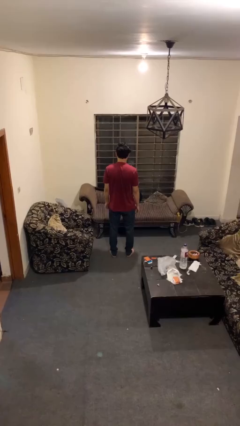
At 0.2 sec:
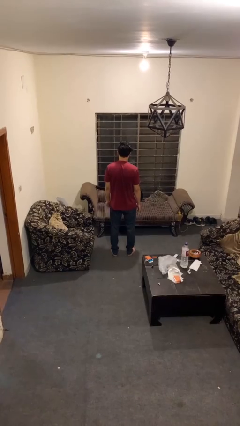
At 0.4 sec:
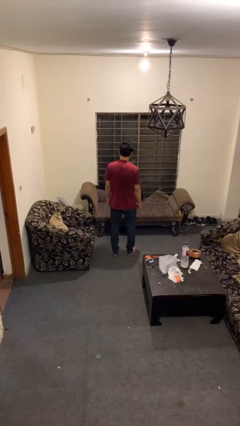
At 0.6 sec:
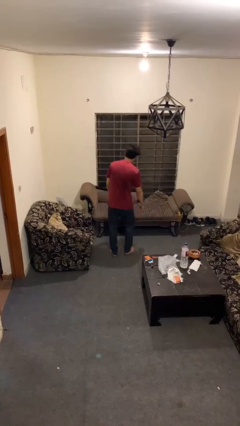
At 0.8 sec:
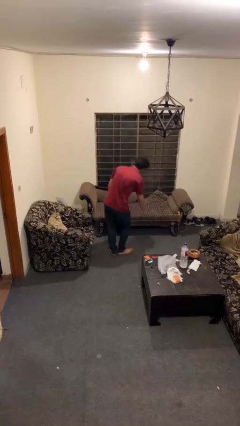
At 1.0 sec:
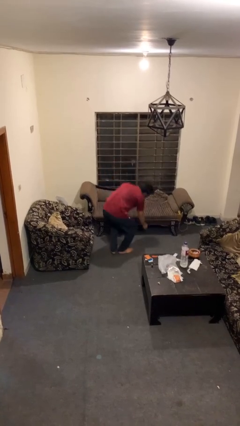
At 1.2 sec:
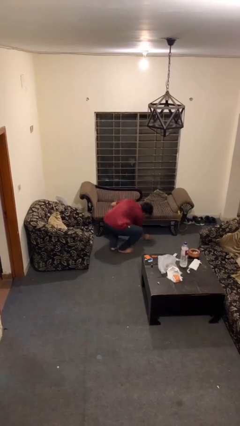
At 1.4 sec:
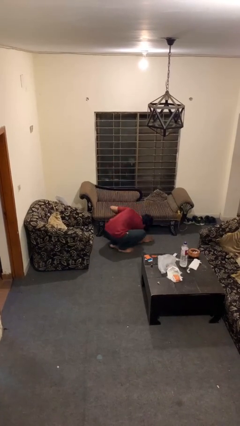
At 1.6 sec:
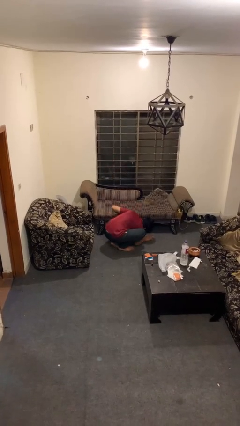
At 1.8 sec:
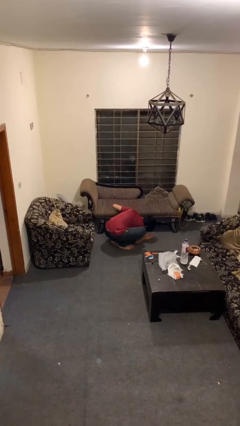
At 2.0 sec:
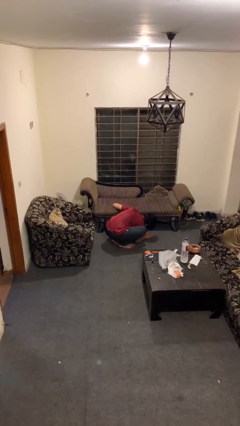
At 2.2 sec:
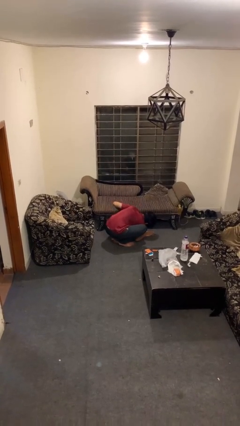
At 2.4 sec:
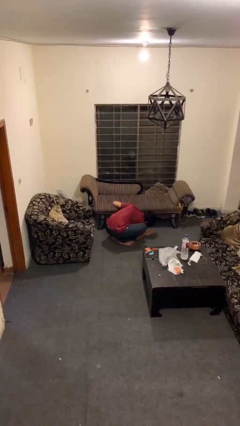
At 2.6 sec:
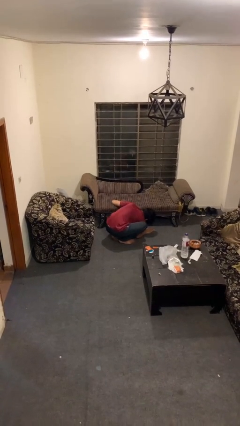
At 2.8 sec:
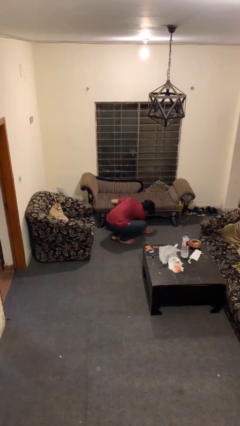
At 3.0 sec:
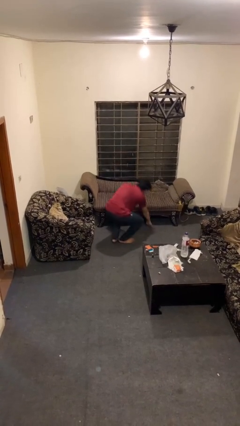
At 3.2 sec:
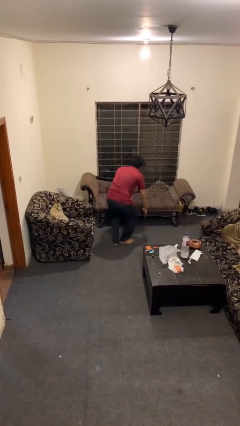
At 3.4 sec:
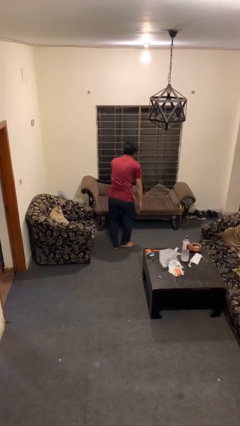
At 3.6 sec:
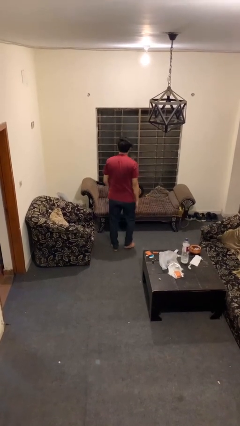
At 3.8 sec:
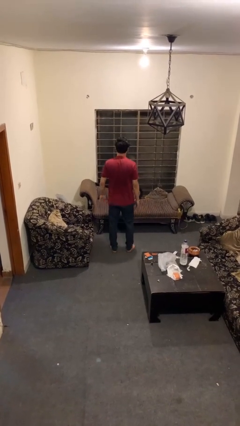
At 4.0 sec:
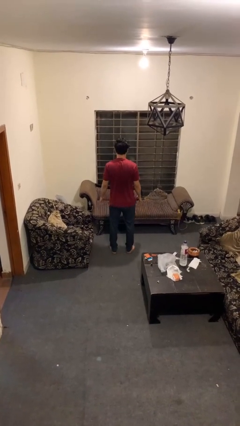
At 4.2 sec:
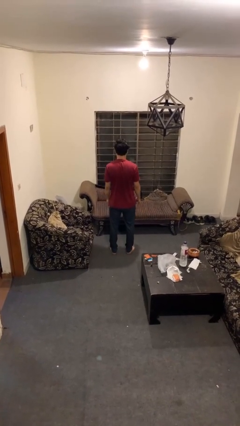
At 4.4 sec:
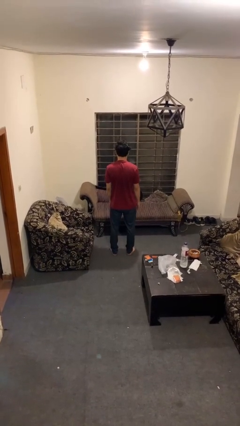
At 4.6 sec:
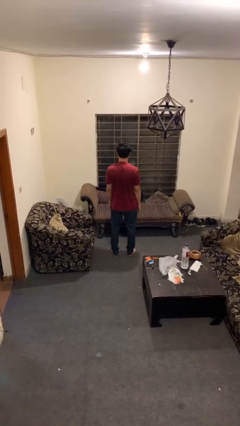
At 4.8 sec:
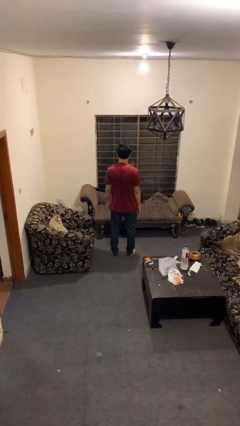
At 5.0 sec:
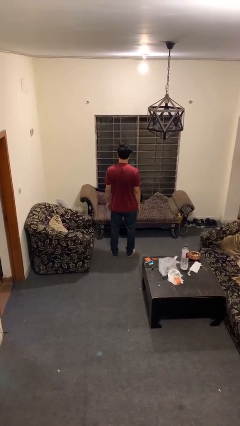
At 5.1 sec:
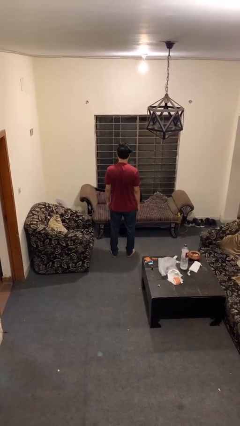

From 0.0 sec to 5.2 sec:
person searches under couch

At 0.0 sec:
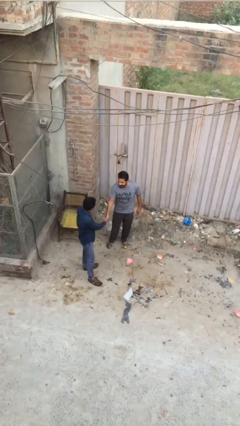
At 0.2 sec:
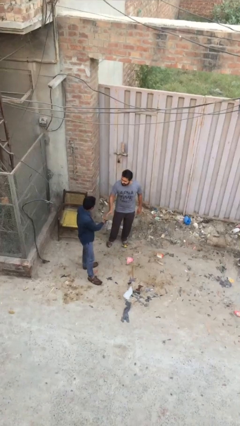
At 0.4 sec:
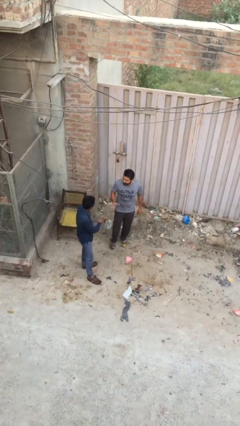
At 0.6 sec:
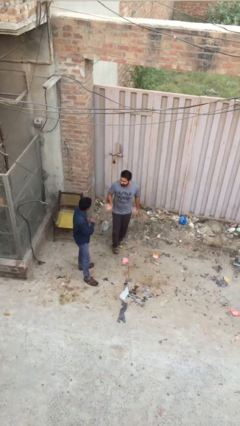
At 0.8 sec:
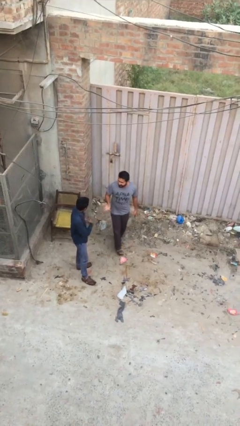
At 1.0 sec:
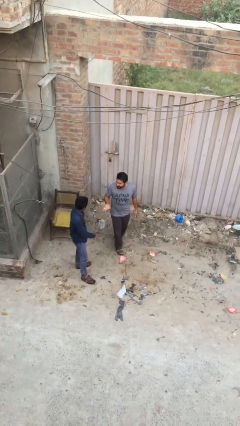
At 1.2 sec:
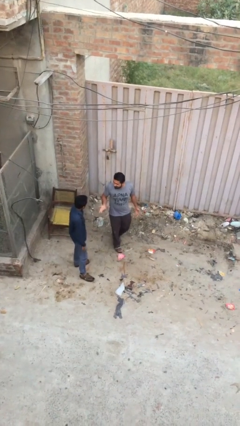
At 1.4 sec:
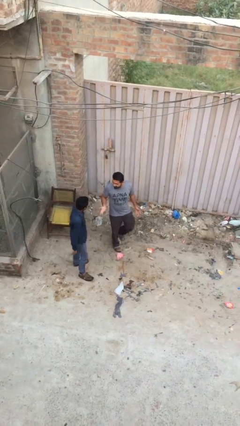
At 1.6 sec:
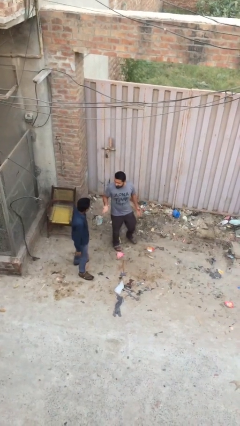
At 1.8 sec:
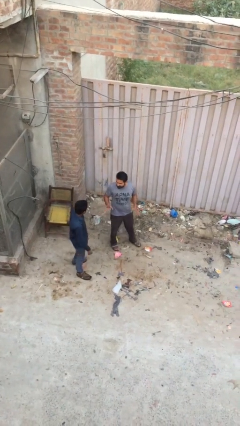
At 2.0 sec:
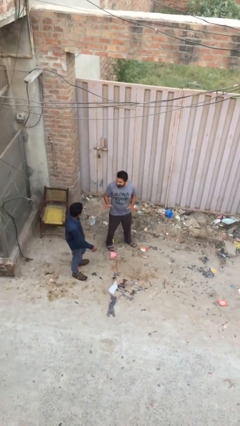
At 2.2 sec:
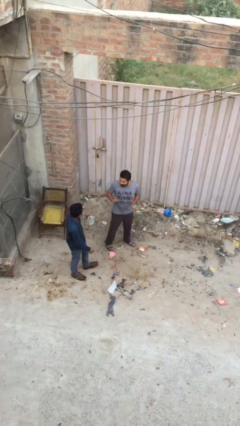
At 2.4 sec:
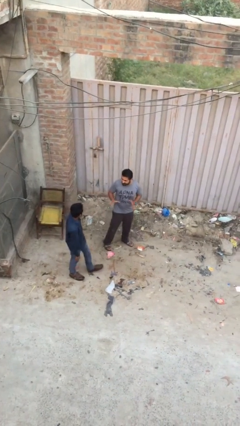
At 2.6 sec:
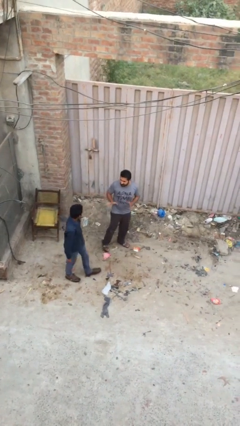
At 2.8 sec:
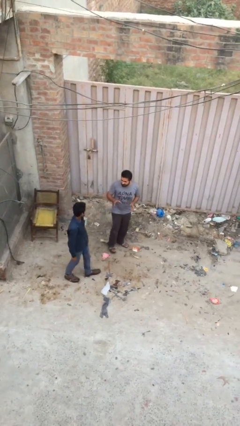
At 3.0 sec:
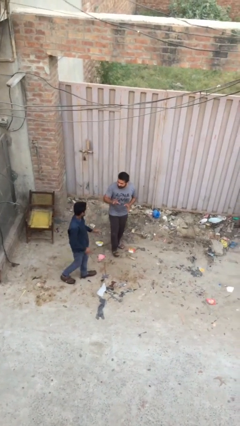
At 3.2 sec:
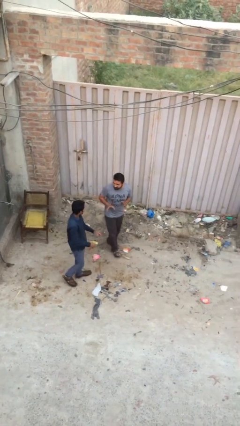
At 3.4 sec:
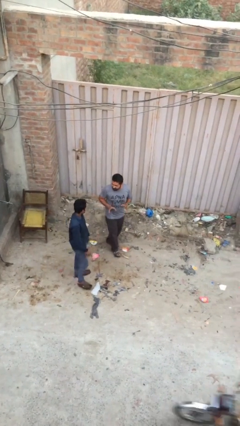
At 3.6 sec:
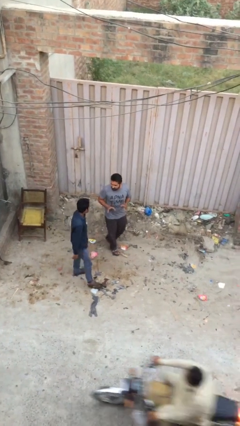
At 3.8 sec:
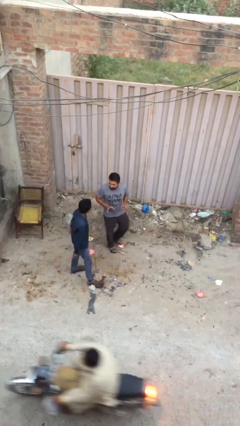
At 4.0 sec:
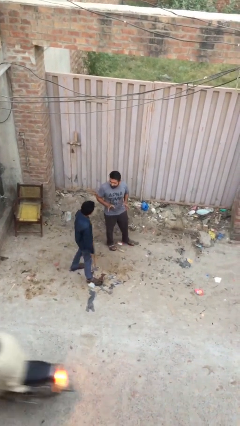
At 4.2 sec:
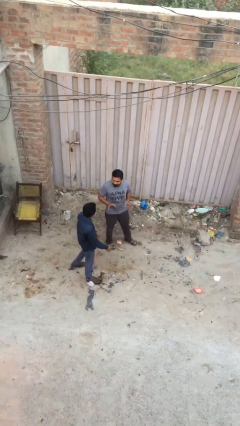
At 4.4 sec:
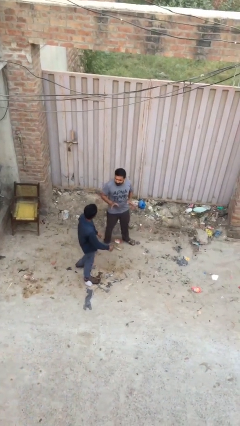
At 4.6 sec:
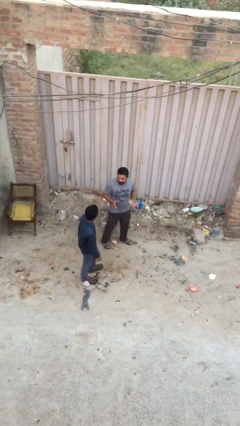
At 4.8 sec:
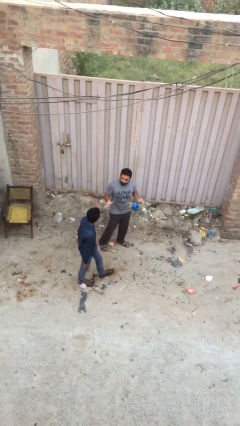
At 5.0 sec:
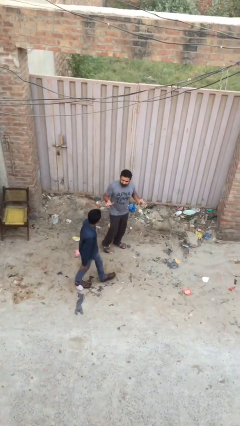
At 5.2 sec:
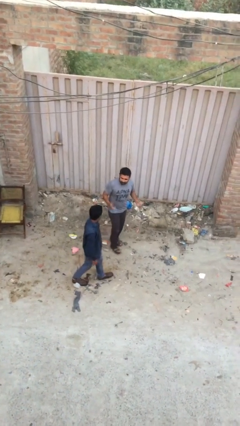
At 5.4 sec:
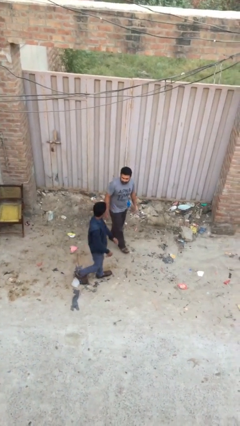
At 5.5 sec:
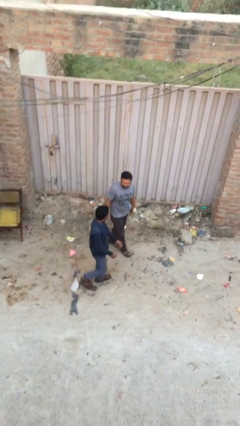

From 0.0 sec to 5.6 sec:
person talks to person

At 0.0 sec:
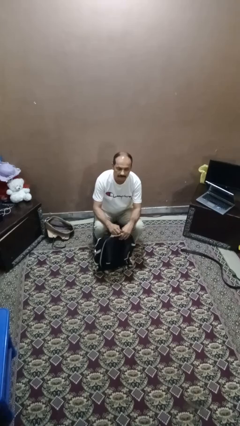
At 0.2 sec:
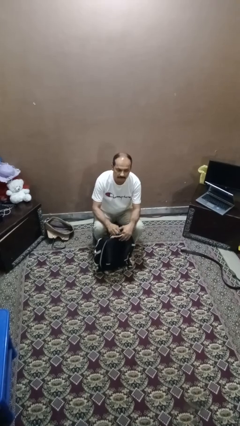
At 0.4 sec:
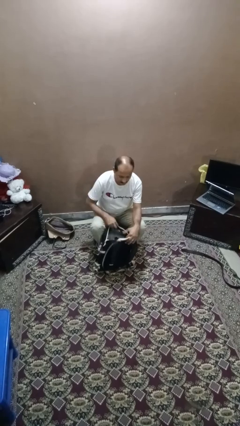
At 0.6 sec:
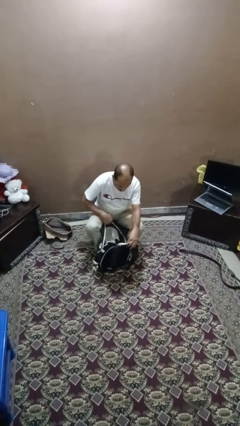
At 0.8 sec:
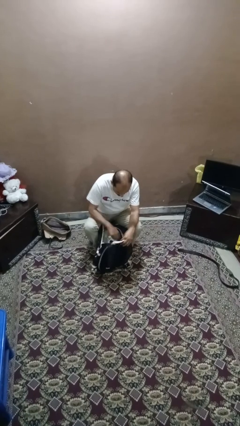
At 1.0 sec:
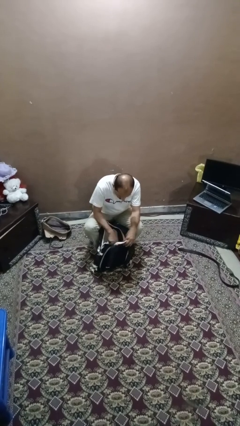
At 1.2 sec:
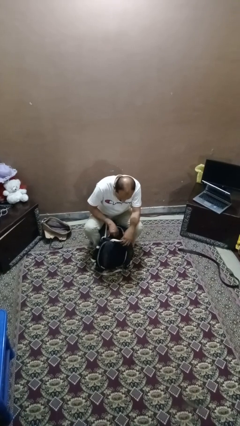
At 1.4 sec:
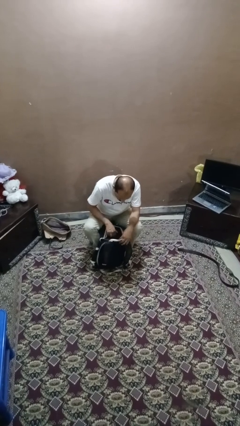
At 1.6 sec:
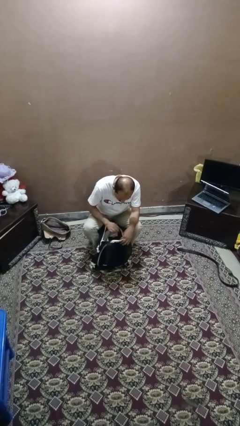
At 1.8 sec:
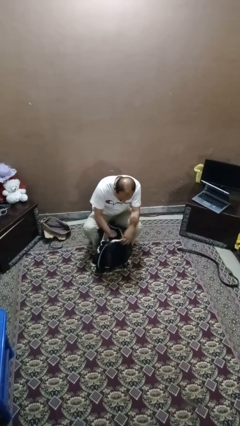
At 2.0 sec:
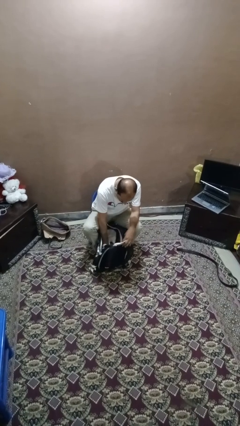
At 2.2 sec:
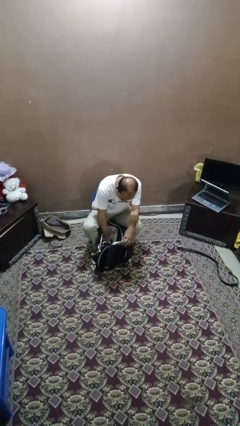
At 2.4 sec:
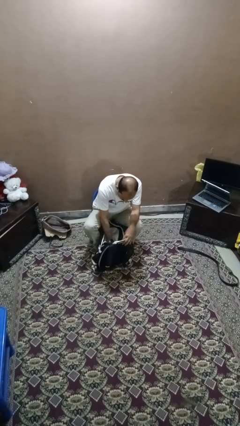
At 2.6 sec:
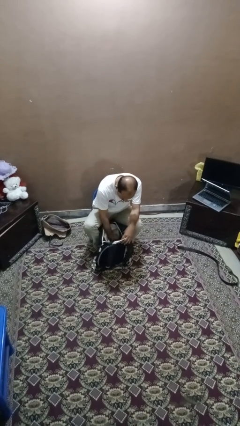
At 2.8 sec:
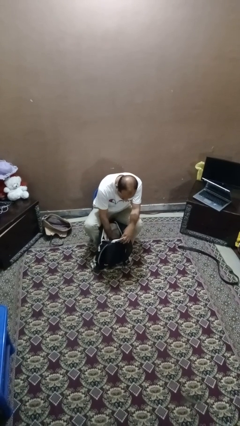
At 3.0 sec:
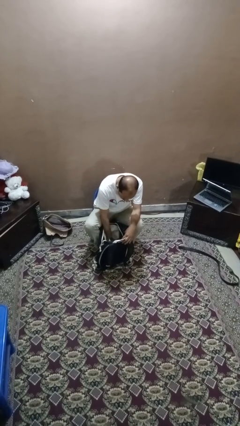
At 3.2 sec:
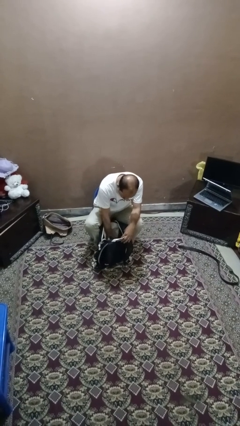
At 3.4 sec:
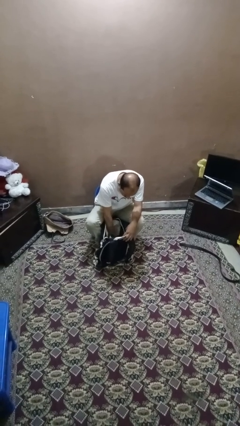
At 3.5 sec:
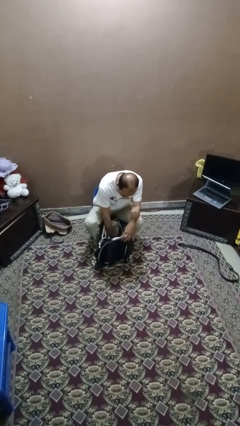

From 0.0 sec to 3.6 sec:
person searches in backpack

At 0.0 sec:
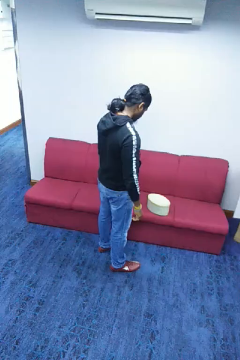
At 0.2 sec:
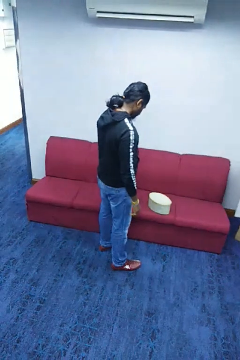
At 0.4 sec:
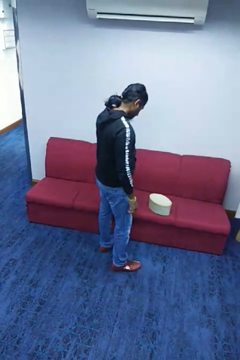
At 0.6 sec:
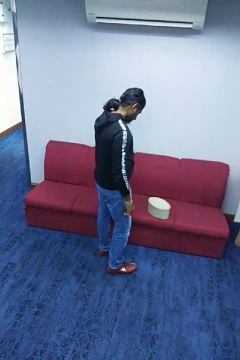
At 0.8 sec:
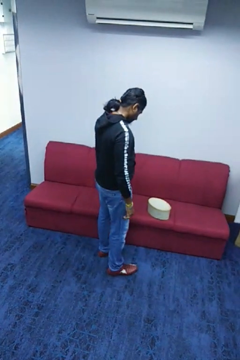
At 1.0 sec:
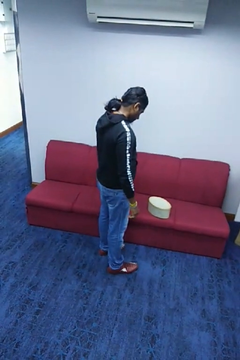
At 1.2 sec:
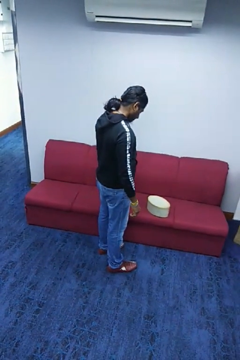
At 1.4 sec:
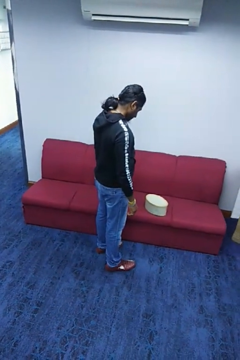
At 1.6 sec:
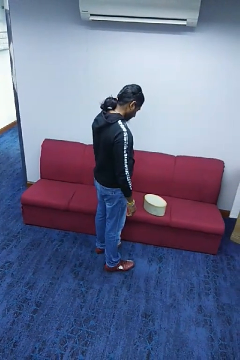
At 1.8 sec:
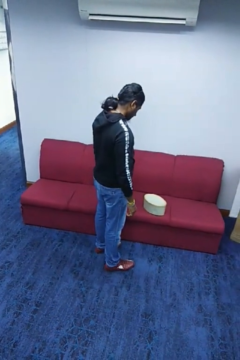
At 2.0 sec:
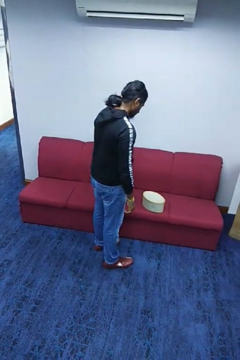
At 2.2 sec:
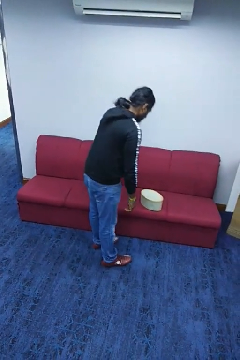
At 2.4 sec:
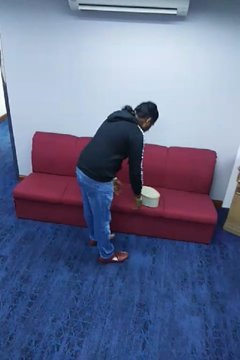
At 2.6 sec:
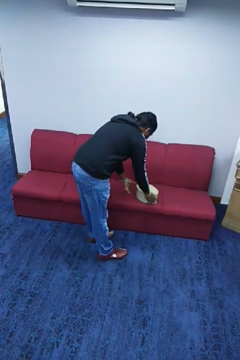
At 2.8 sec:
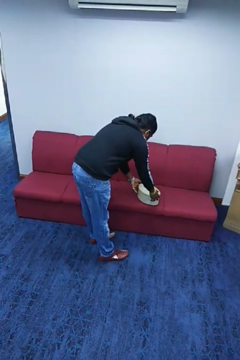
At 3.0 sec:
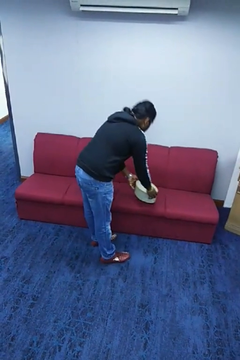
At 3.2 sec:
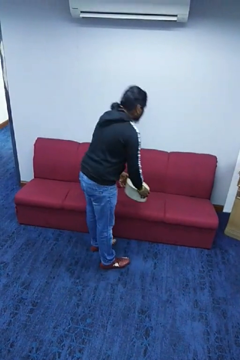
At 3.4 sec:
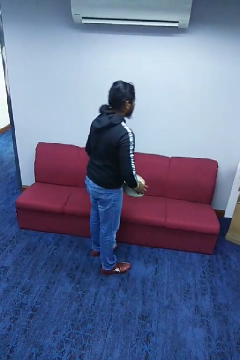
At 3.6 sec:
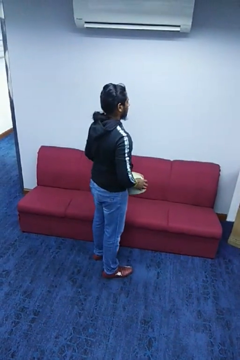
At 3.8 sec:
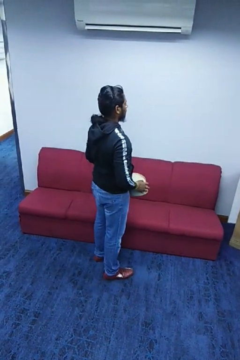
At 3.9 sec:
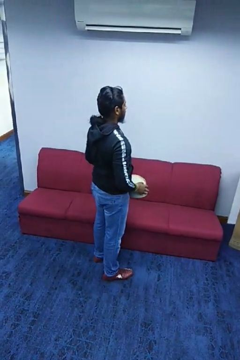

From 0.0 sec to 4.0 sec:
person picks up object from couch
